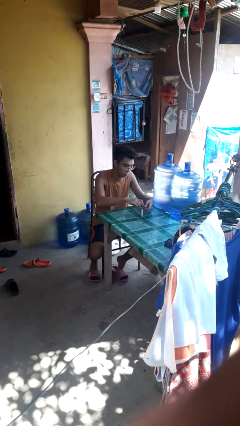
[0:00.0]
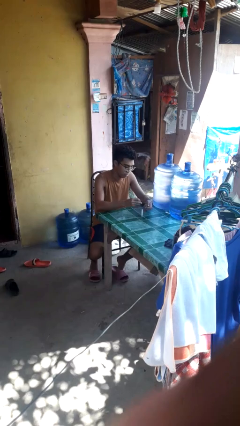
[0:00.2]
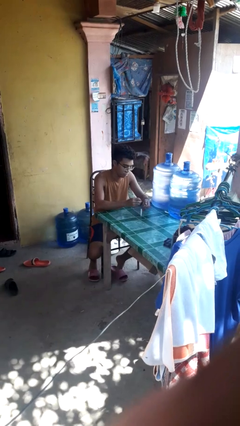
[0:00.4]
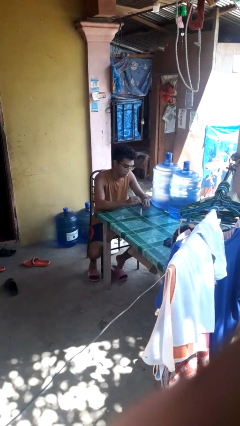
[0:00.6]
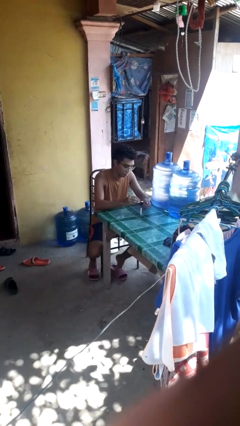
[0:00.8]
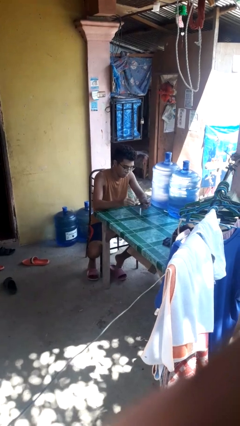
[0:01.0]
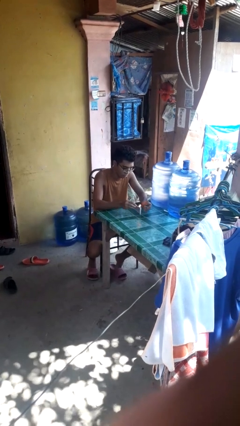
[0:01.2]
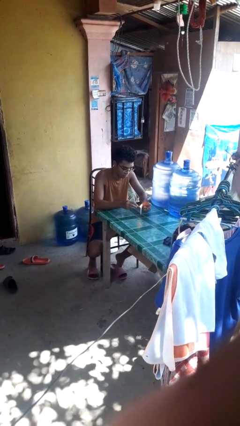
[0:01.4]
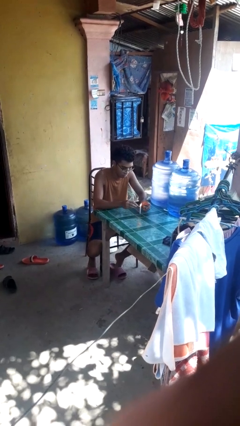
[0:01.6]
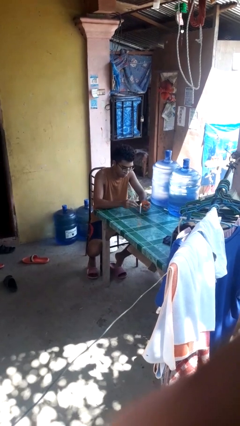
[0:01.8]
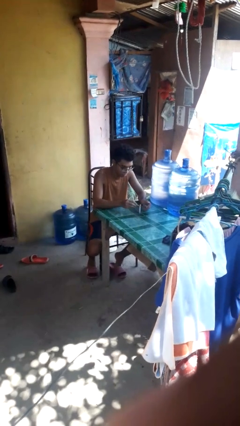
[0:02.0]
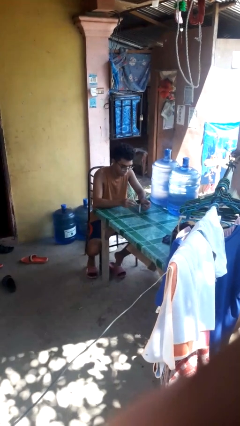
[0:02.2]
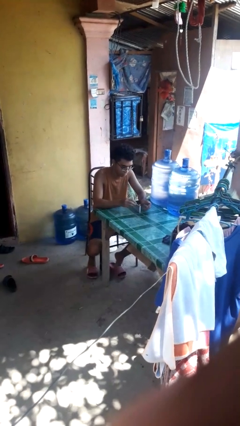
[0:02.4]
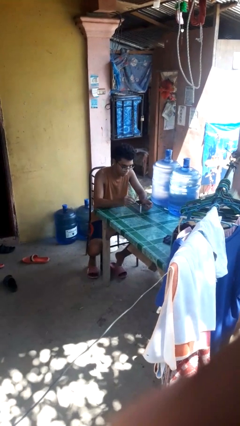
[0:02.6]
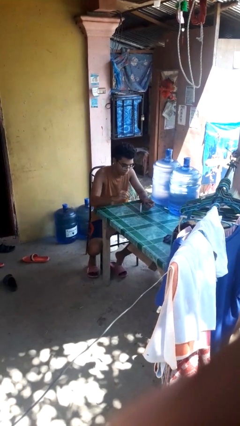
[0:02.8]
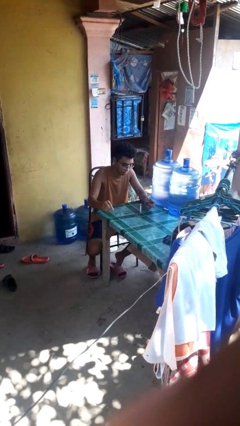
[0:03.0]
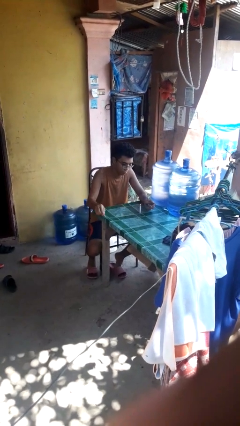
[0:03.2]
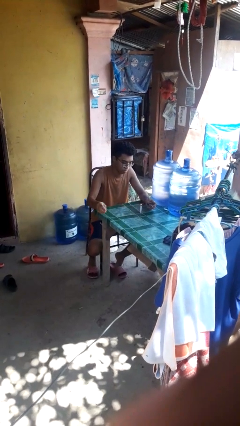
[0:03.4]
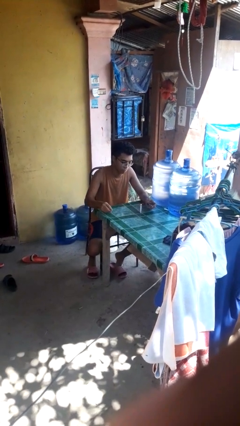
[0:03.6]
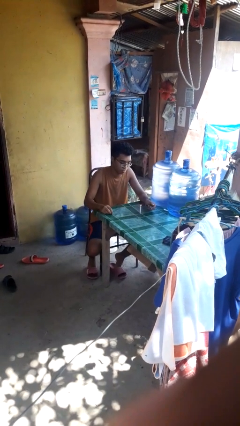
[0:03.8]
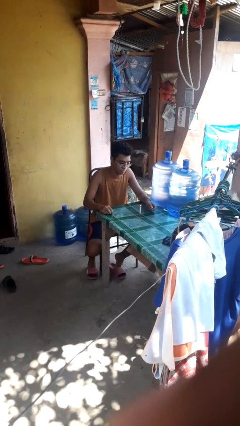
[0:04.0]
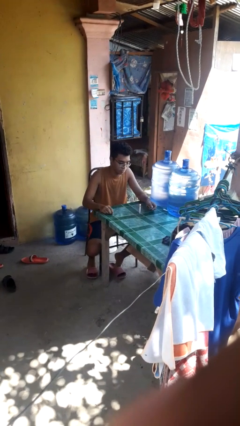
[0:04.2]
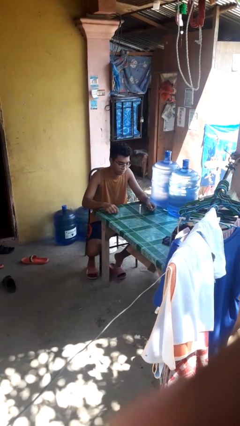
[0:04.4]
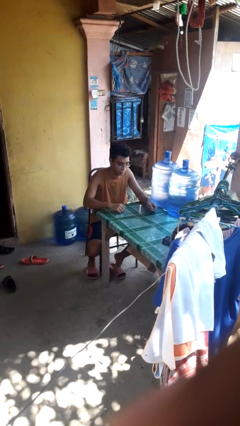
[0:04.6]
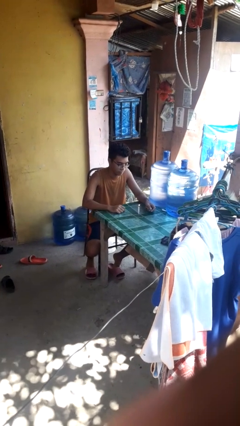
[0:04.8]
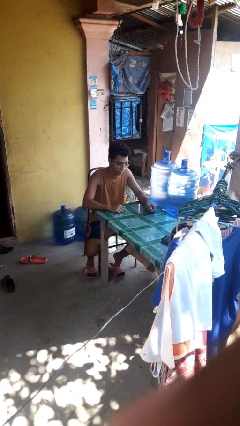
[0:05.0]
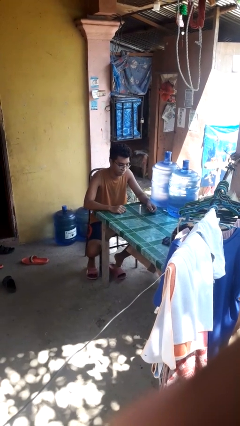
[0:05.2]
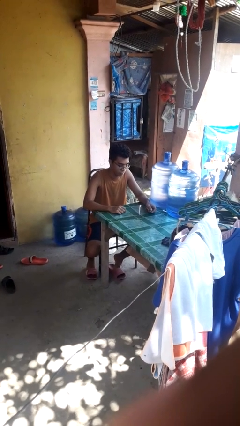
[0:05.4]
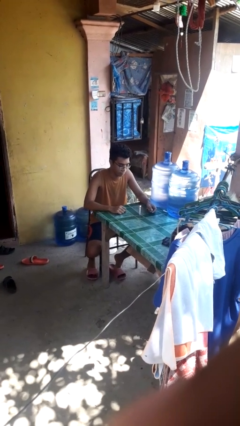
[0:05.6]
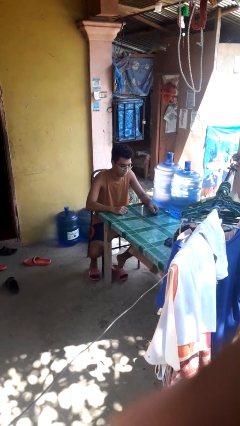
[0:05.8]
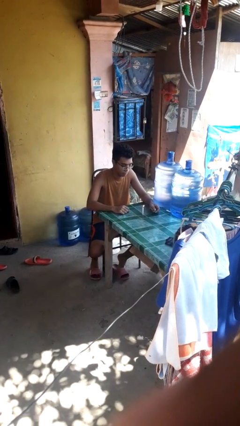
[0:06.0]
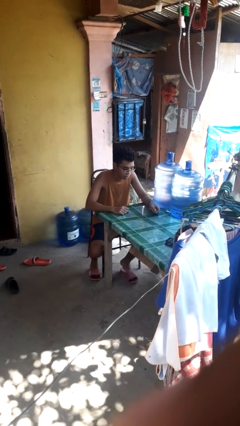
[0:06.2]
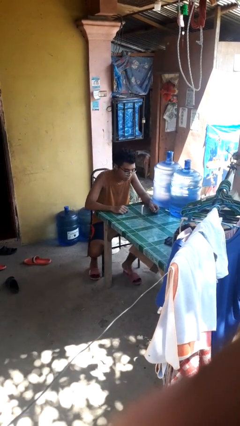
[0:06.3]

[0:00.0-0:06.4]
person lights candle

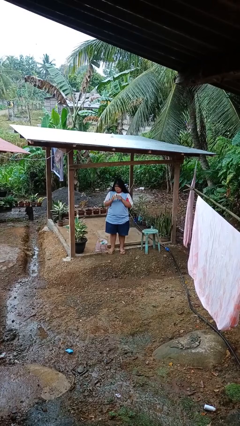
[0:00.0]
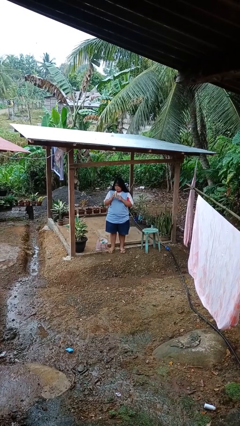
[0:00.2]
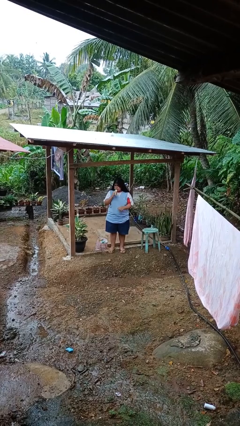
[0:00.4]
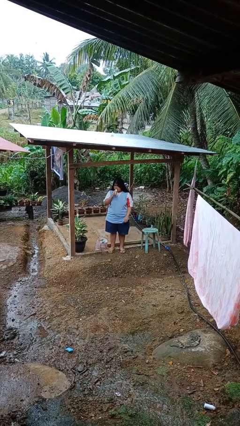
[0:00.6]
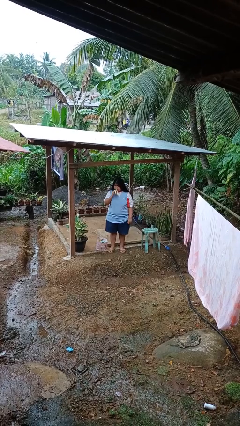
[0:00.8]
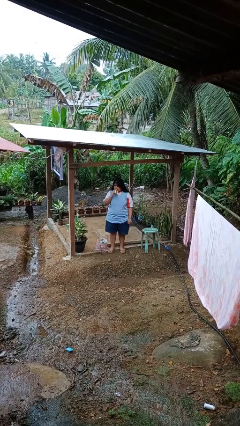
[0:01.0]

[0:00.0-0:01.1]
person eats banana

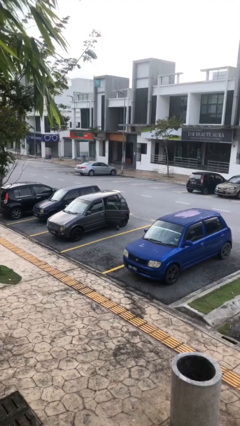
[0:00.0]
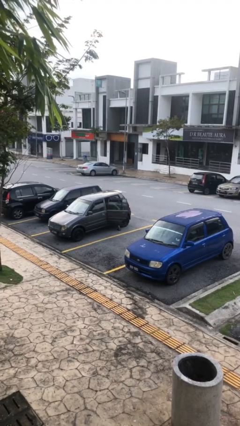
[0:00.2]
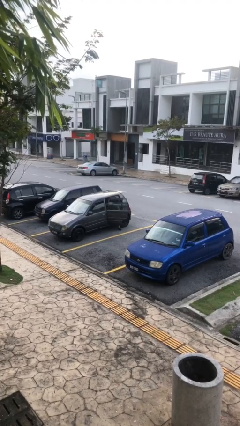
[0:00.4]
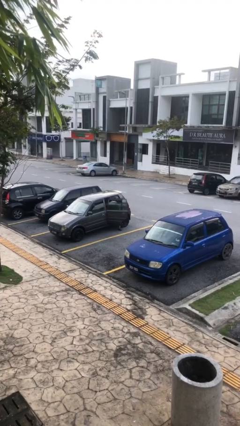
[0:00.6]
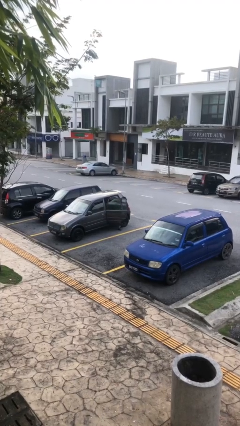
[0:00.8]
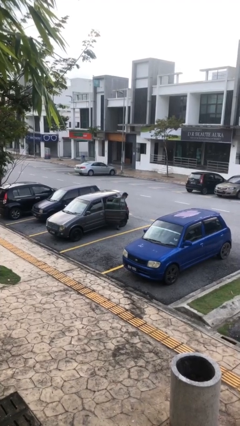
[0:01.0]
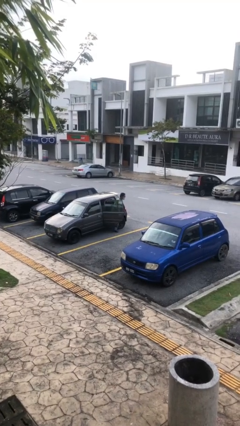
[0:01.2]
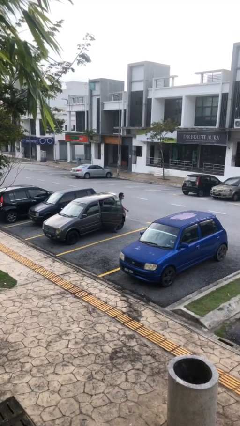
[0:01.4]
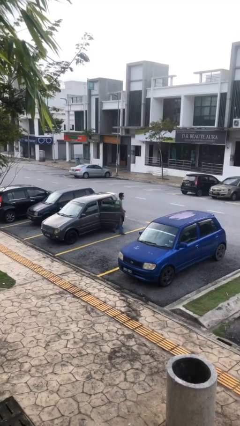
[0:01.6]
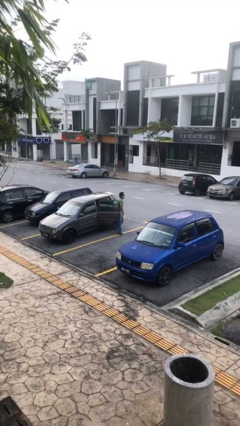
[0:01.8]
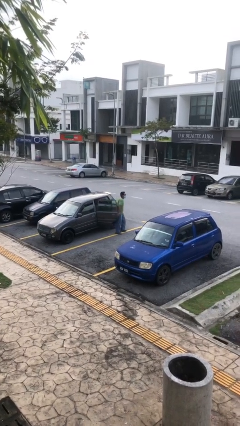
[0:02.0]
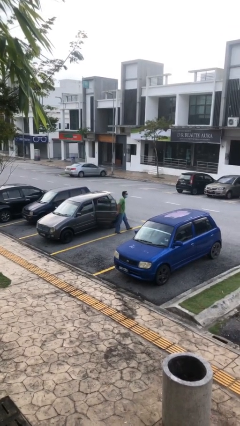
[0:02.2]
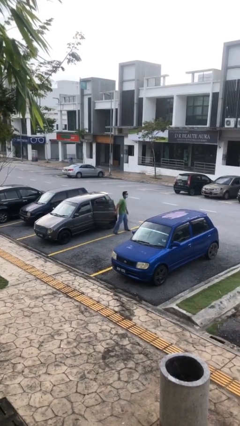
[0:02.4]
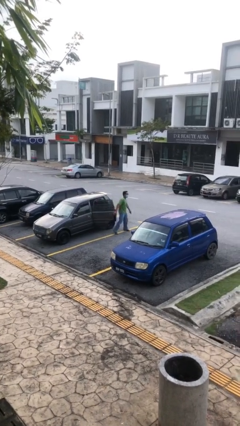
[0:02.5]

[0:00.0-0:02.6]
person exits car

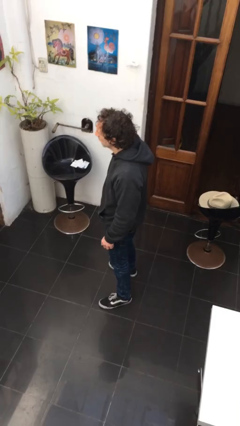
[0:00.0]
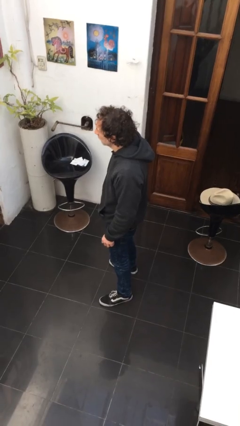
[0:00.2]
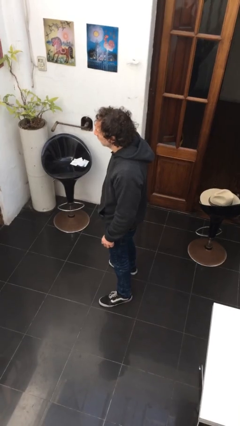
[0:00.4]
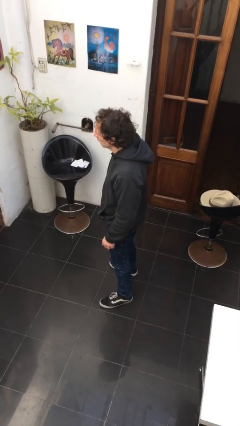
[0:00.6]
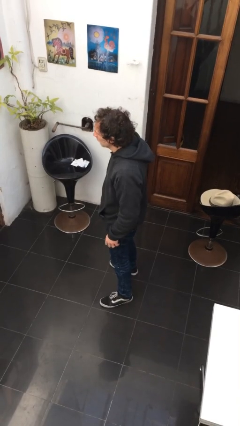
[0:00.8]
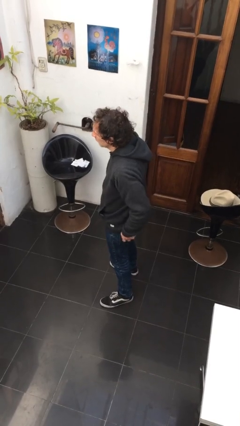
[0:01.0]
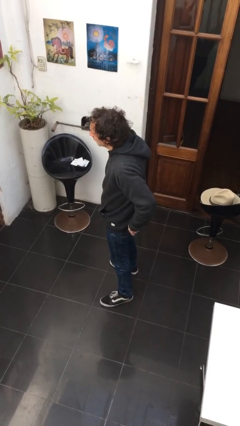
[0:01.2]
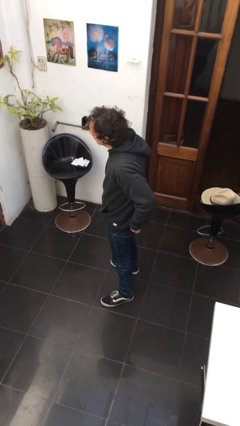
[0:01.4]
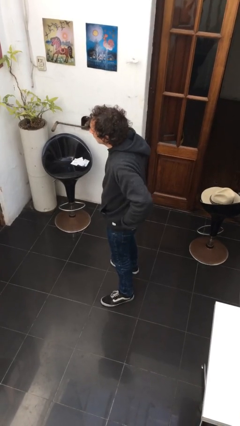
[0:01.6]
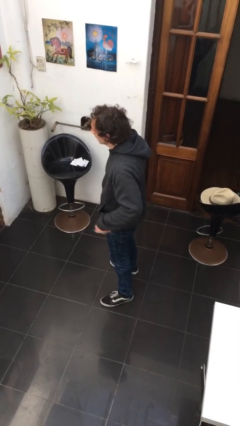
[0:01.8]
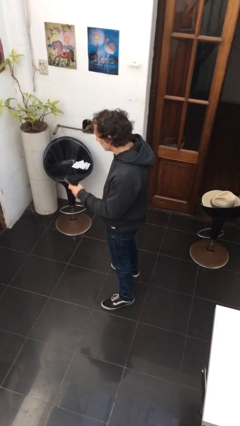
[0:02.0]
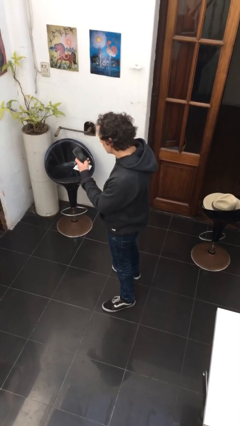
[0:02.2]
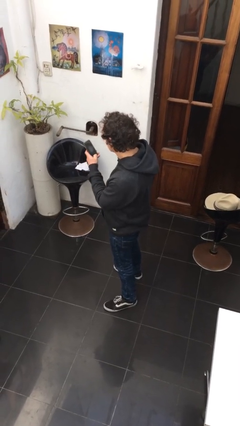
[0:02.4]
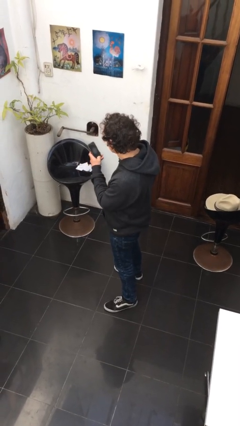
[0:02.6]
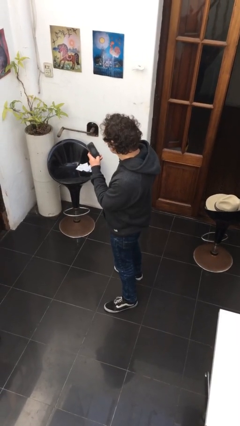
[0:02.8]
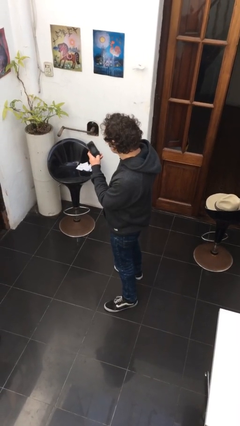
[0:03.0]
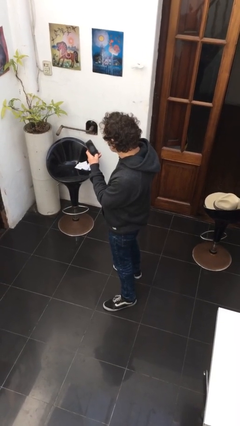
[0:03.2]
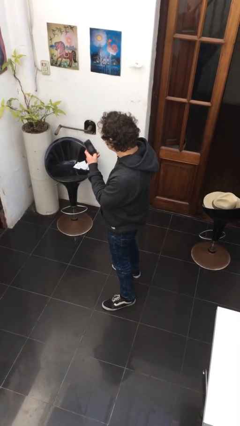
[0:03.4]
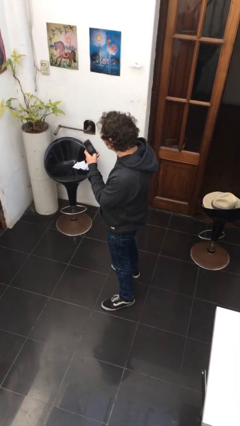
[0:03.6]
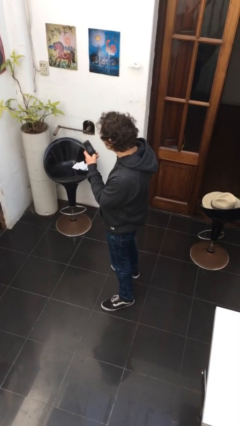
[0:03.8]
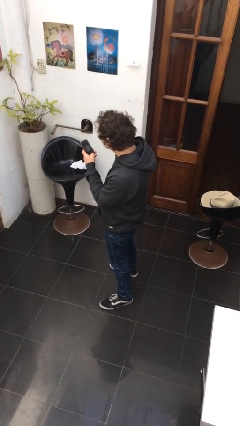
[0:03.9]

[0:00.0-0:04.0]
person takes phone from pocket

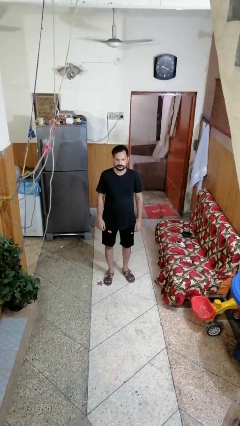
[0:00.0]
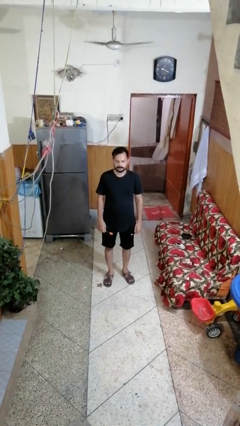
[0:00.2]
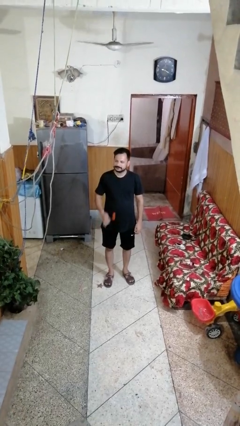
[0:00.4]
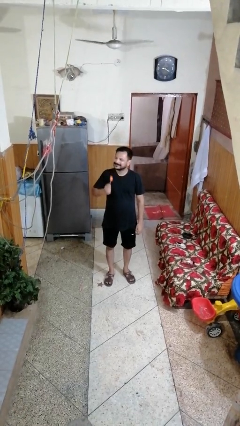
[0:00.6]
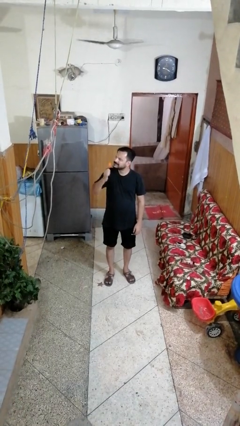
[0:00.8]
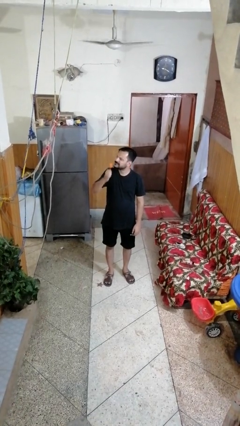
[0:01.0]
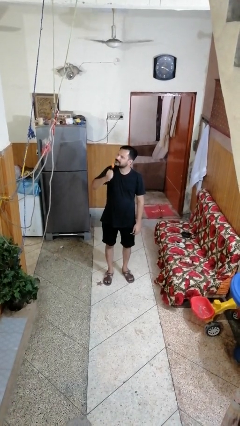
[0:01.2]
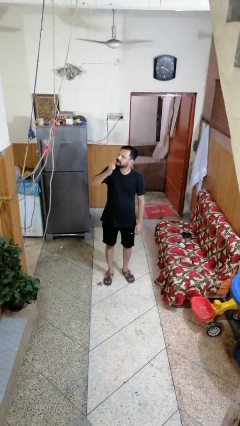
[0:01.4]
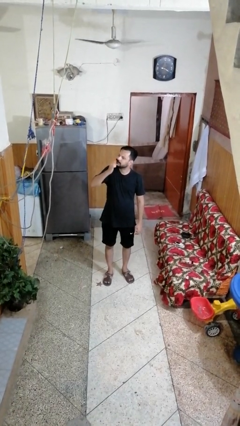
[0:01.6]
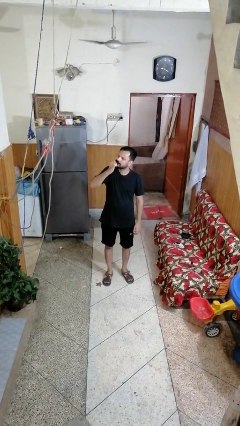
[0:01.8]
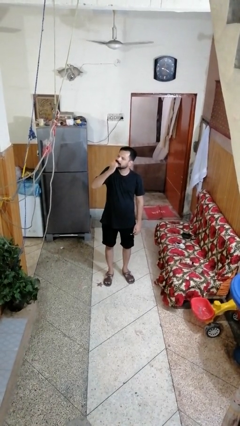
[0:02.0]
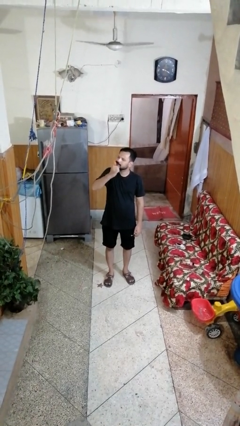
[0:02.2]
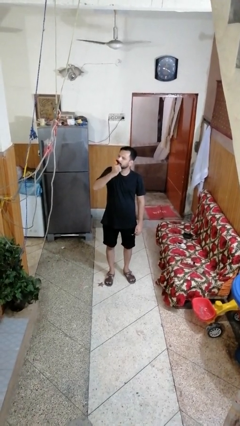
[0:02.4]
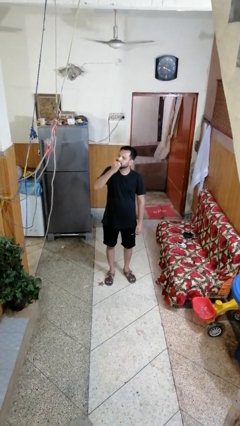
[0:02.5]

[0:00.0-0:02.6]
person brushes teeth

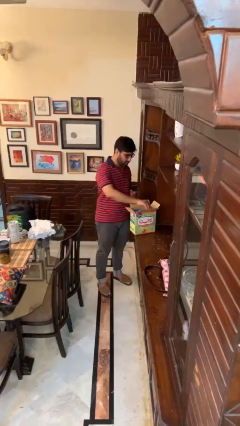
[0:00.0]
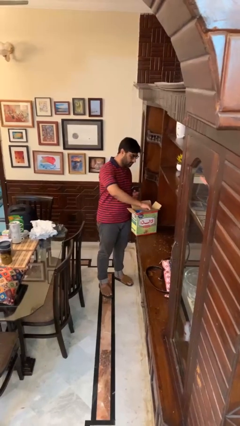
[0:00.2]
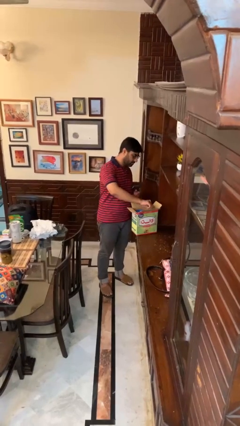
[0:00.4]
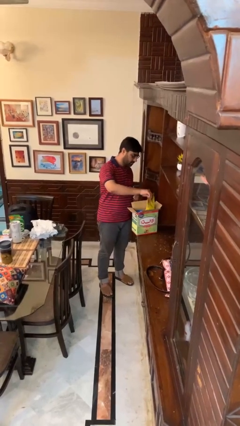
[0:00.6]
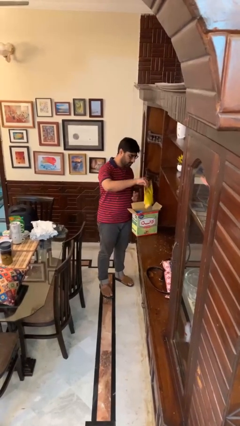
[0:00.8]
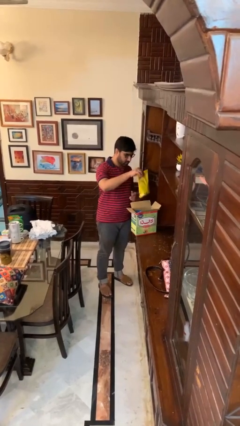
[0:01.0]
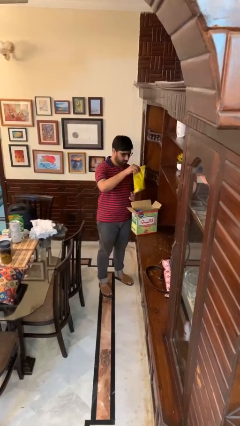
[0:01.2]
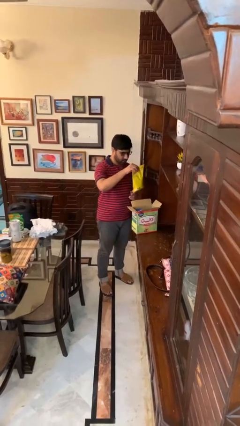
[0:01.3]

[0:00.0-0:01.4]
person takes object from box
